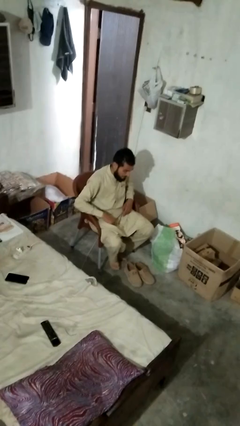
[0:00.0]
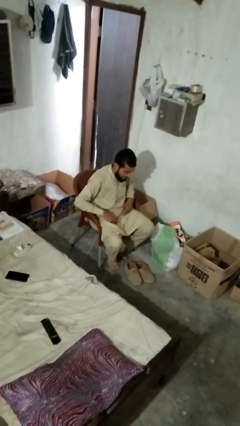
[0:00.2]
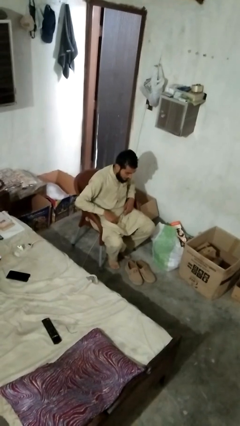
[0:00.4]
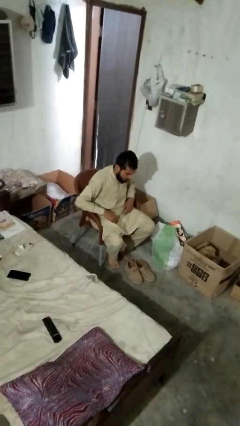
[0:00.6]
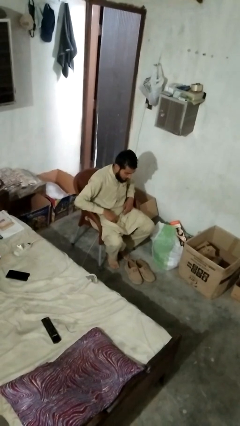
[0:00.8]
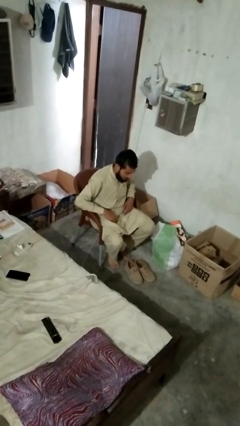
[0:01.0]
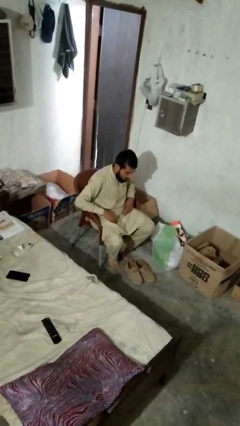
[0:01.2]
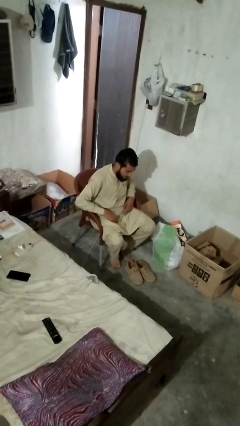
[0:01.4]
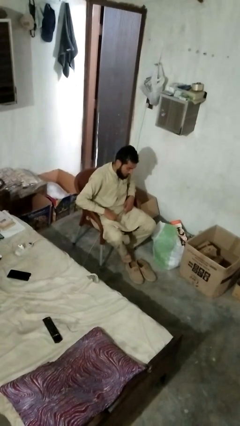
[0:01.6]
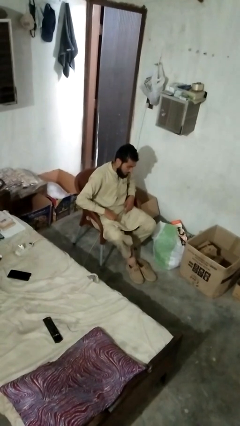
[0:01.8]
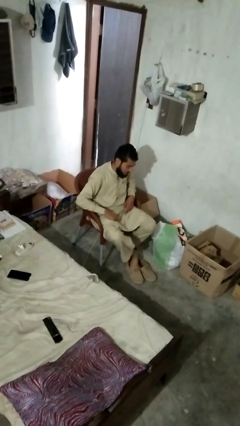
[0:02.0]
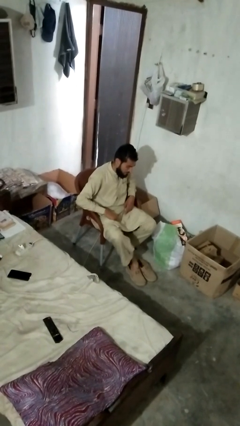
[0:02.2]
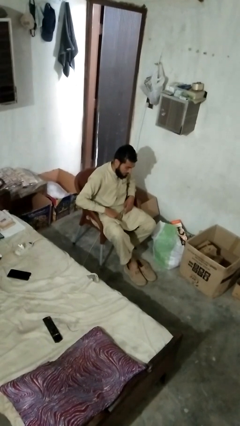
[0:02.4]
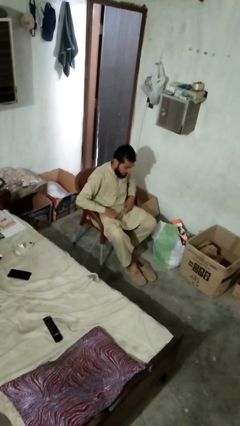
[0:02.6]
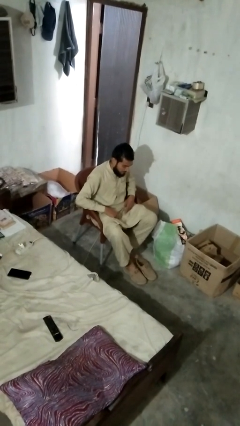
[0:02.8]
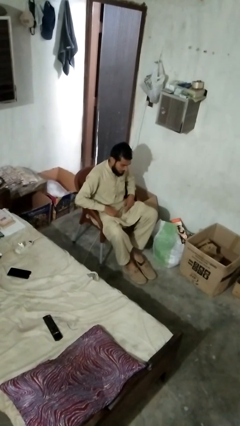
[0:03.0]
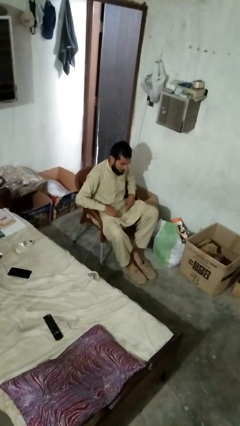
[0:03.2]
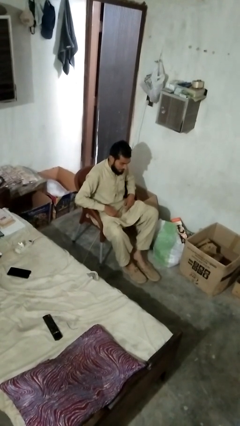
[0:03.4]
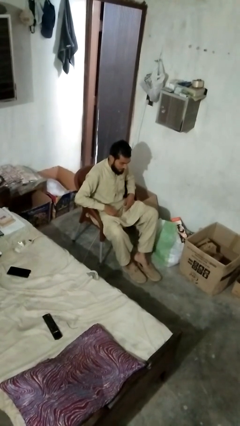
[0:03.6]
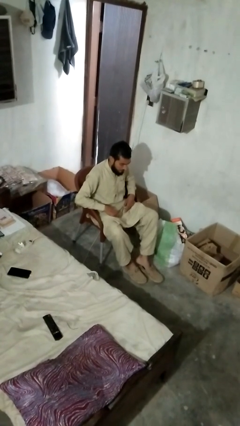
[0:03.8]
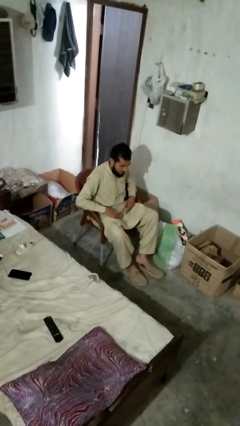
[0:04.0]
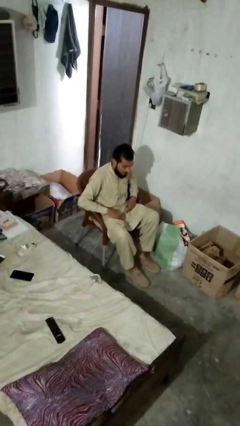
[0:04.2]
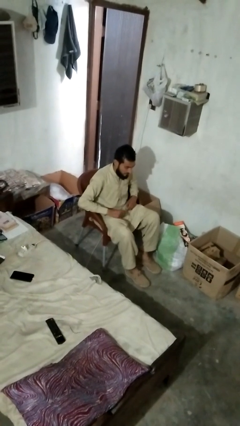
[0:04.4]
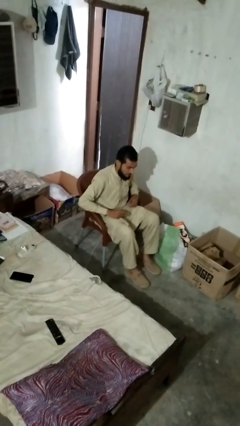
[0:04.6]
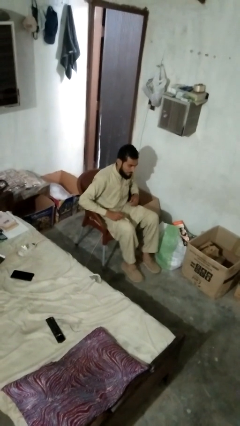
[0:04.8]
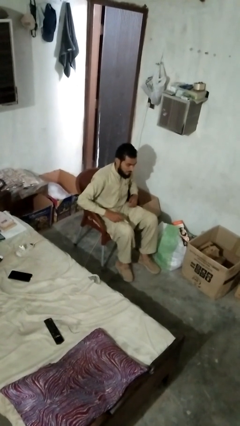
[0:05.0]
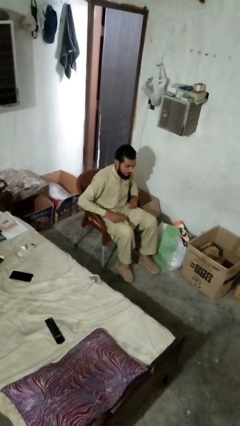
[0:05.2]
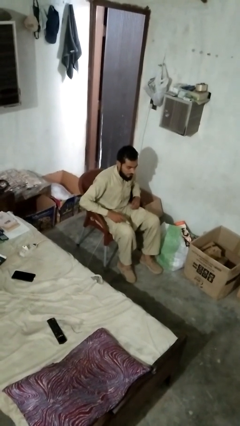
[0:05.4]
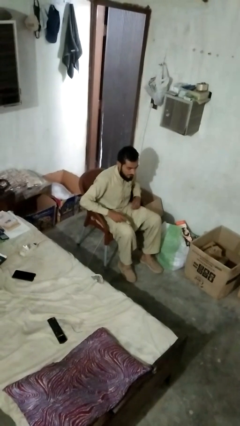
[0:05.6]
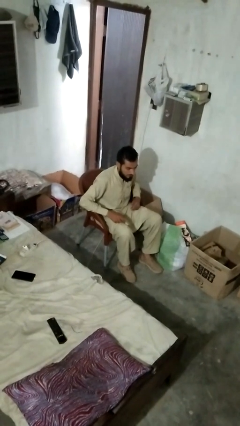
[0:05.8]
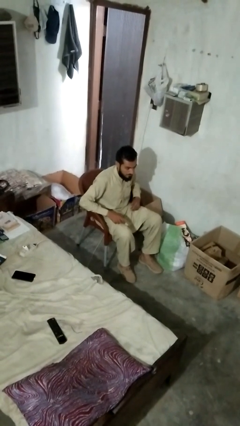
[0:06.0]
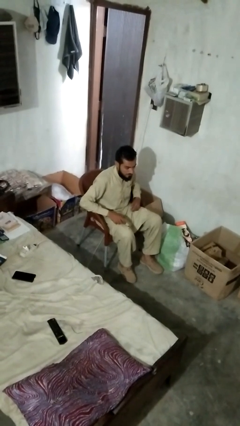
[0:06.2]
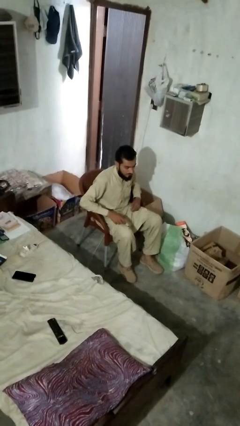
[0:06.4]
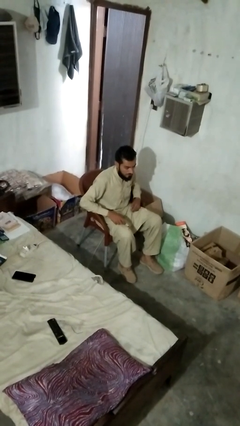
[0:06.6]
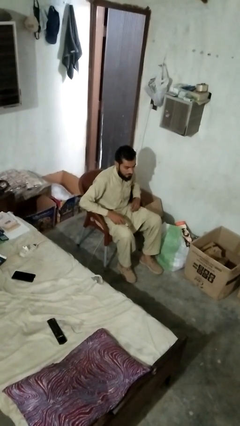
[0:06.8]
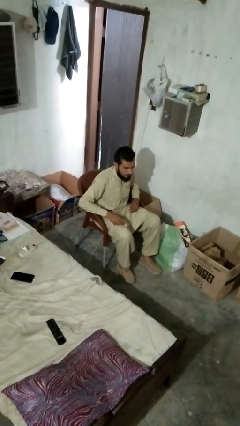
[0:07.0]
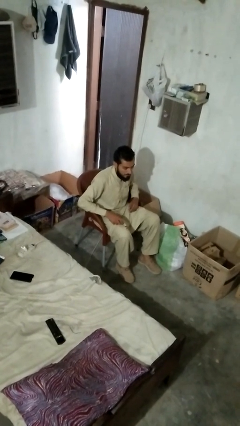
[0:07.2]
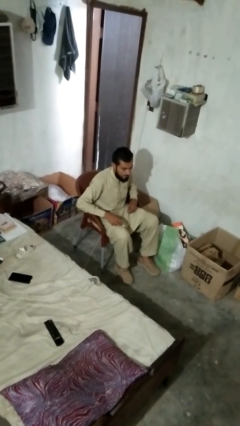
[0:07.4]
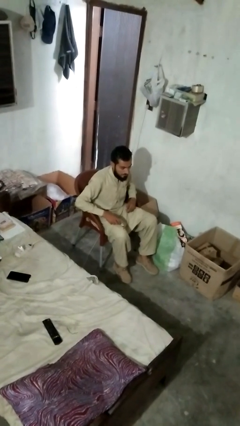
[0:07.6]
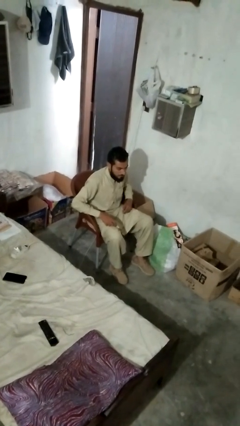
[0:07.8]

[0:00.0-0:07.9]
person puts on boots

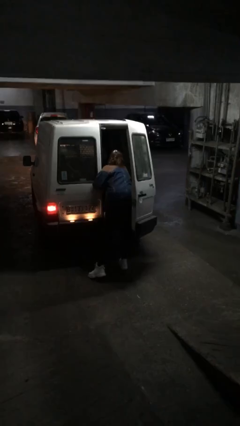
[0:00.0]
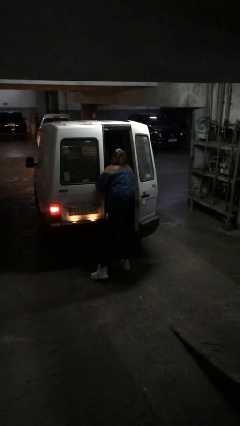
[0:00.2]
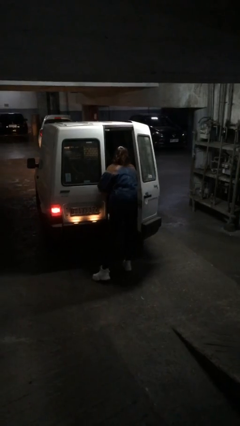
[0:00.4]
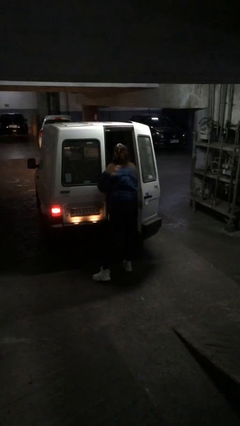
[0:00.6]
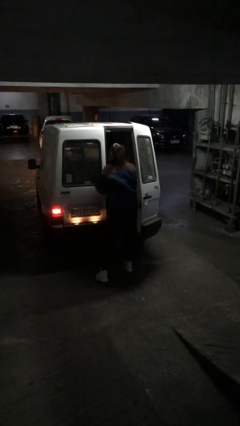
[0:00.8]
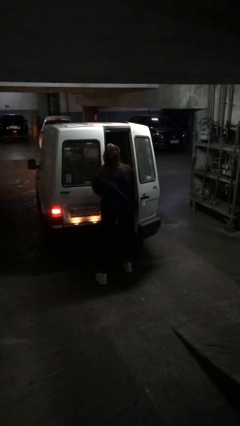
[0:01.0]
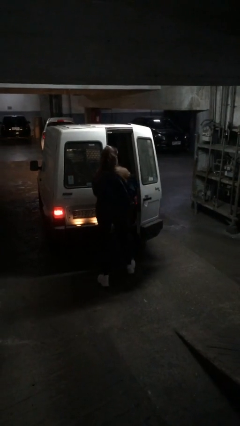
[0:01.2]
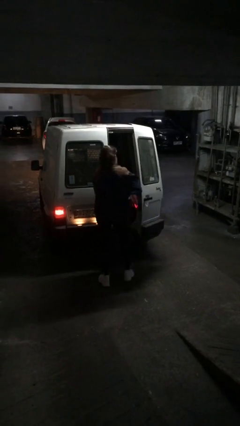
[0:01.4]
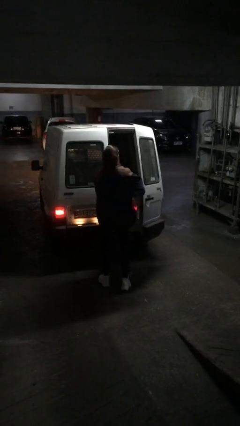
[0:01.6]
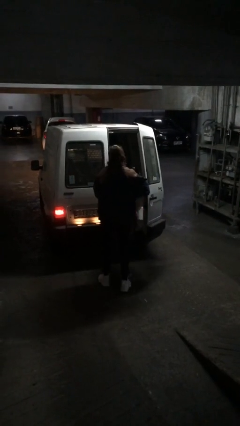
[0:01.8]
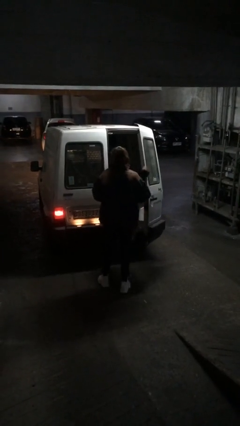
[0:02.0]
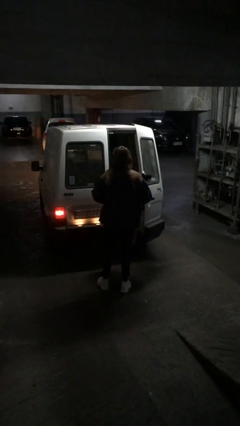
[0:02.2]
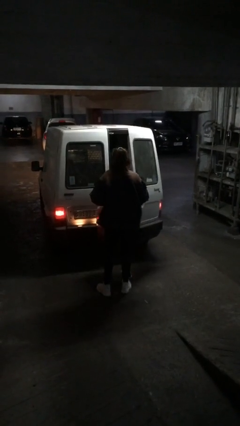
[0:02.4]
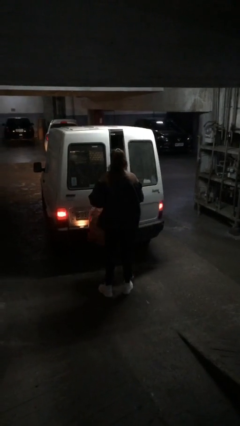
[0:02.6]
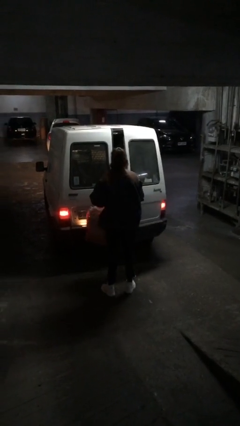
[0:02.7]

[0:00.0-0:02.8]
person unloads car

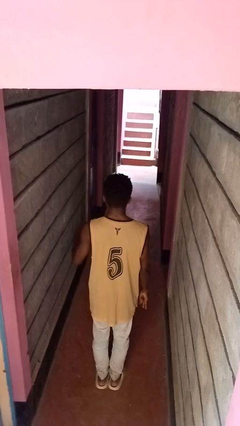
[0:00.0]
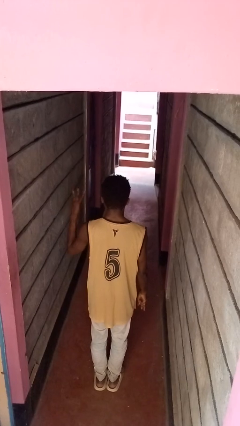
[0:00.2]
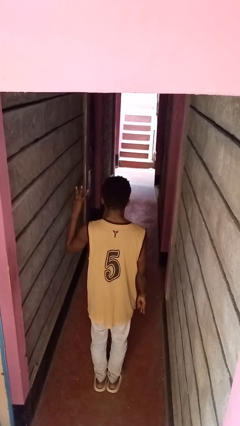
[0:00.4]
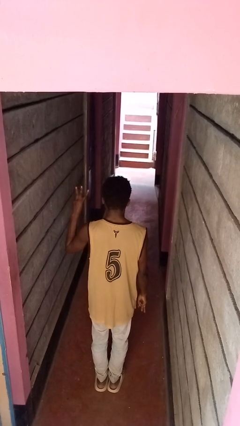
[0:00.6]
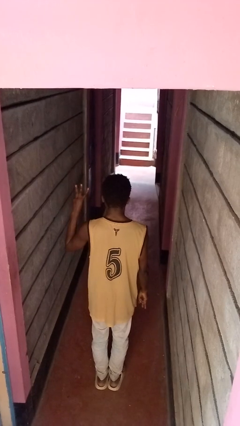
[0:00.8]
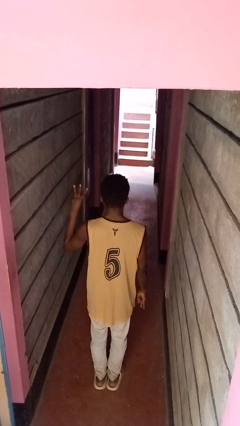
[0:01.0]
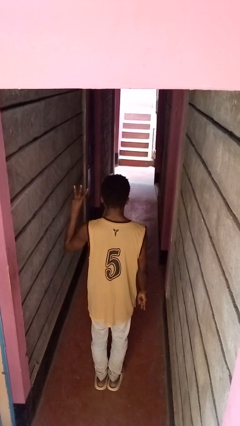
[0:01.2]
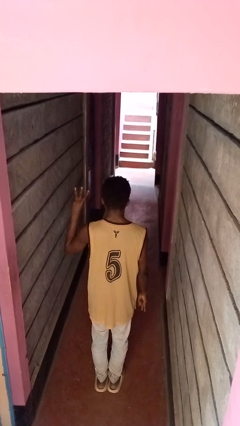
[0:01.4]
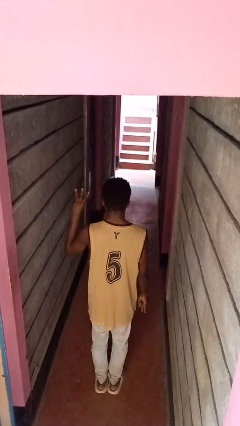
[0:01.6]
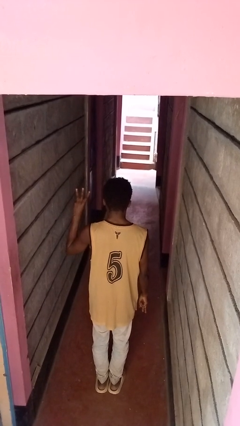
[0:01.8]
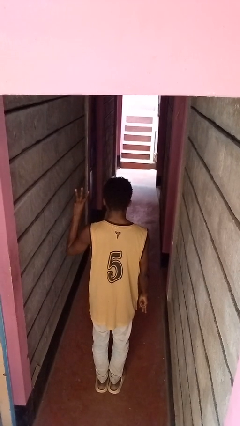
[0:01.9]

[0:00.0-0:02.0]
person gestures number three

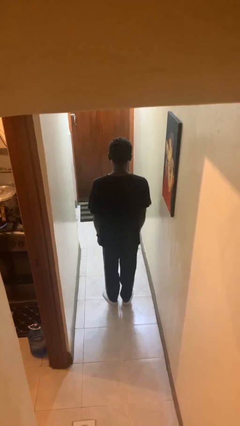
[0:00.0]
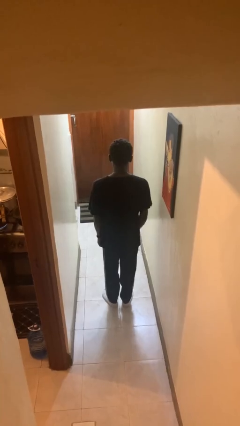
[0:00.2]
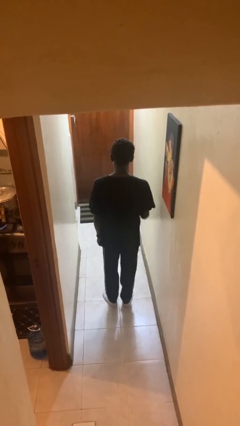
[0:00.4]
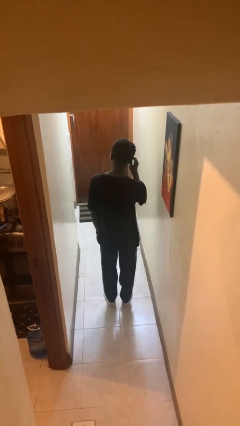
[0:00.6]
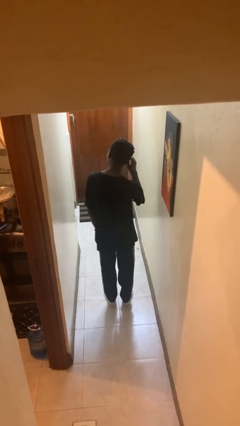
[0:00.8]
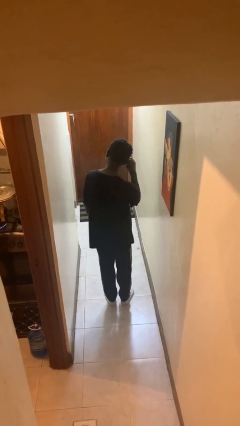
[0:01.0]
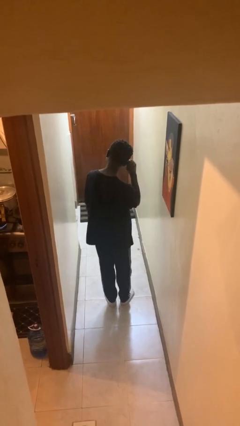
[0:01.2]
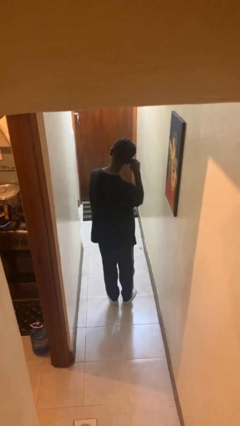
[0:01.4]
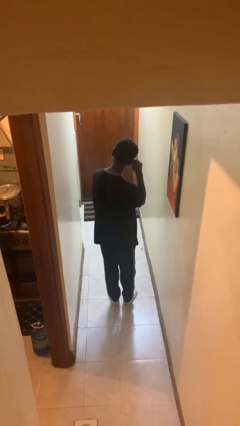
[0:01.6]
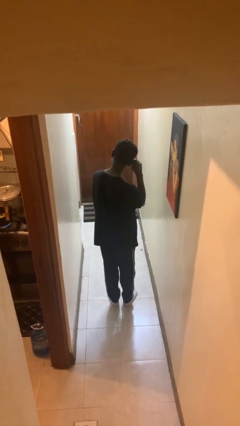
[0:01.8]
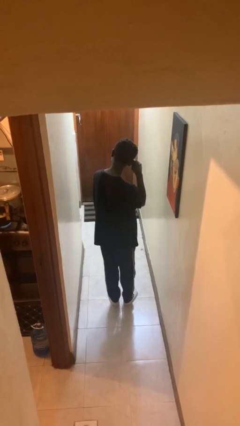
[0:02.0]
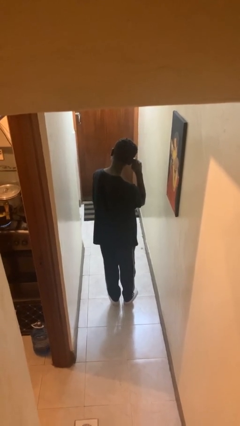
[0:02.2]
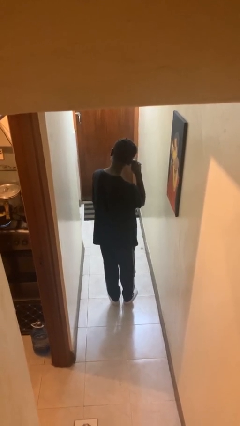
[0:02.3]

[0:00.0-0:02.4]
person touches earlobe

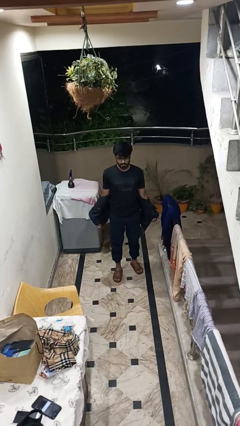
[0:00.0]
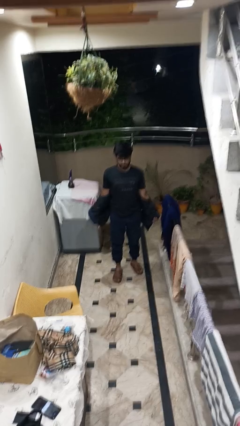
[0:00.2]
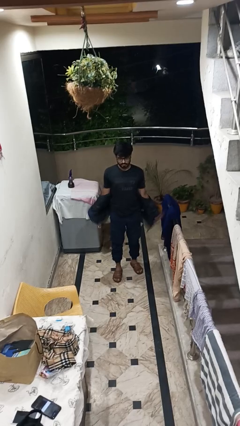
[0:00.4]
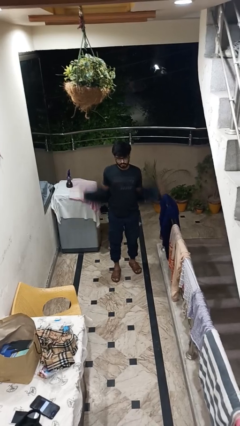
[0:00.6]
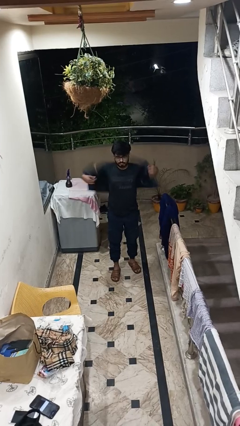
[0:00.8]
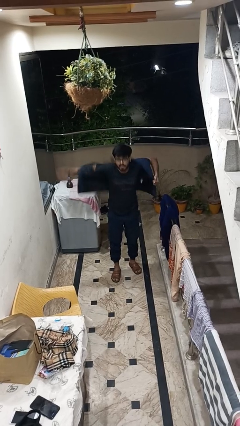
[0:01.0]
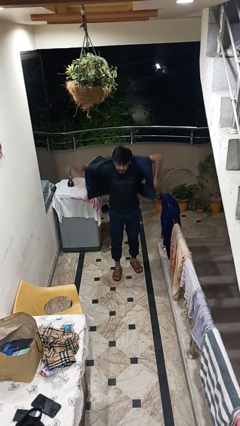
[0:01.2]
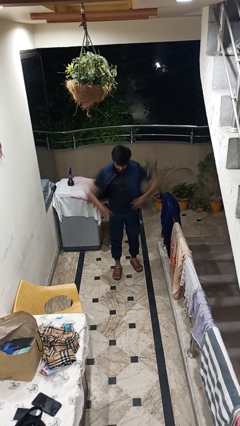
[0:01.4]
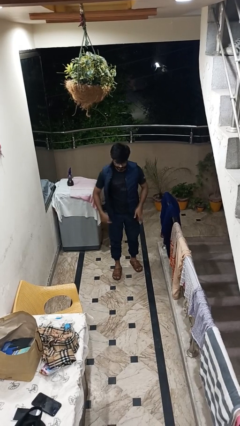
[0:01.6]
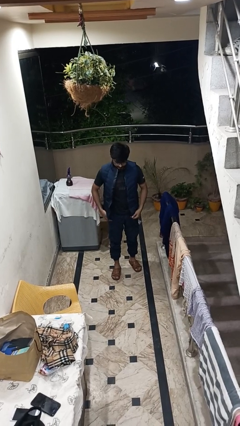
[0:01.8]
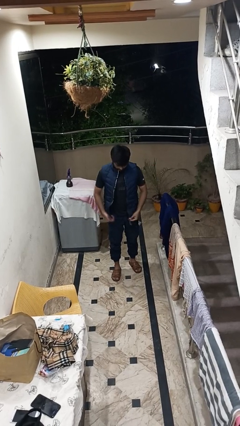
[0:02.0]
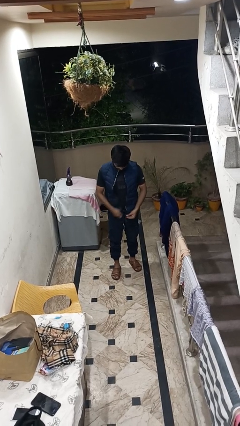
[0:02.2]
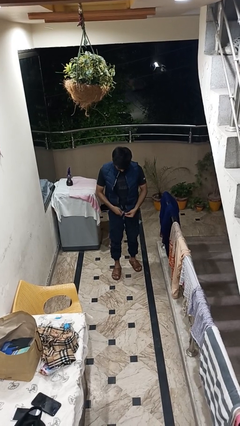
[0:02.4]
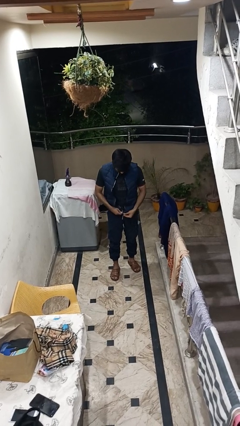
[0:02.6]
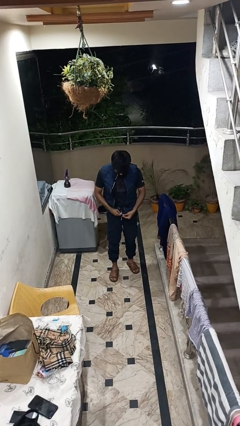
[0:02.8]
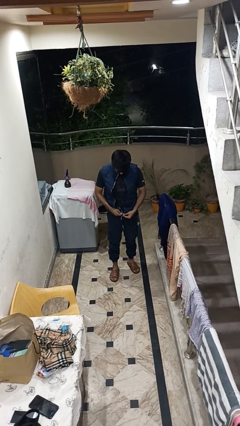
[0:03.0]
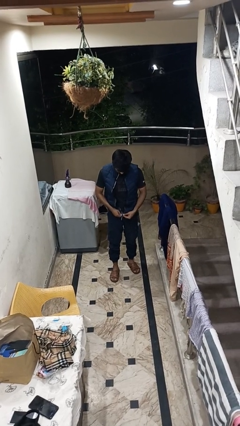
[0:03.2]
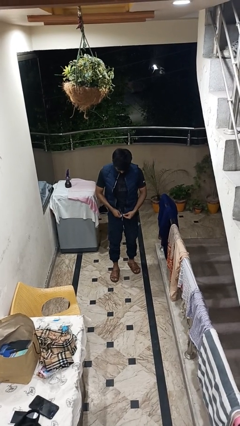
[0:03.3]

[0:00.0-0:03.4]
person puts on jacket
